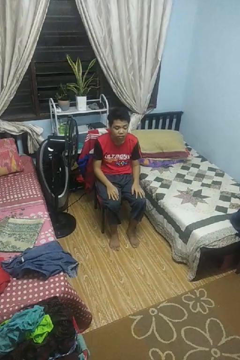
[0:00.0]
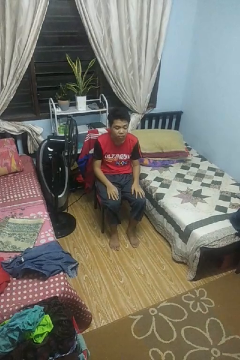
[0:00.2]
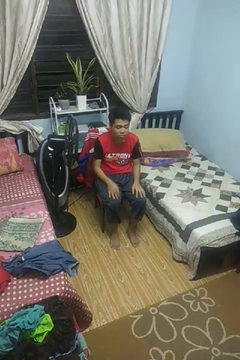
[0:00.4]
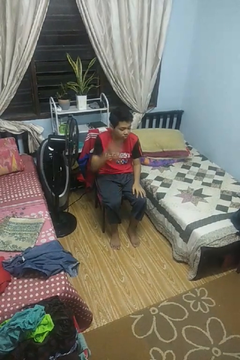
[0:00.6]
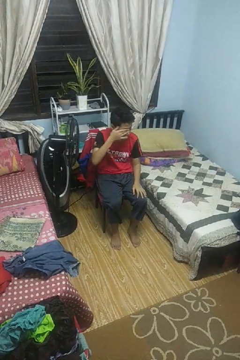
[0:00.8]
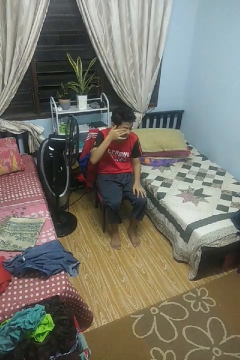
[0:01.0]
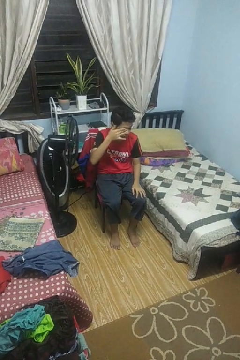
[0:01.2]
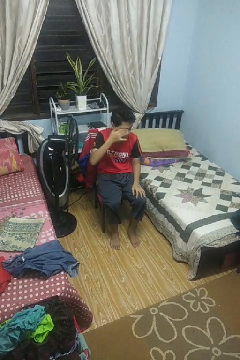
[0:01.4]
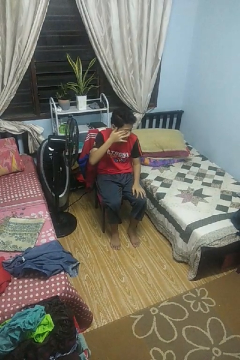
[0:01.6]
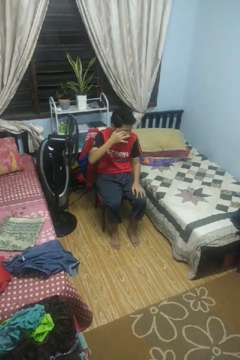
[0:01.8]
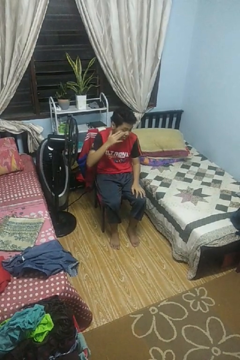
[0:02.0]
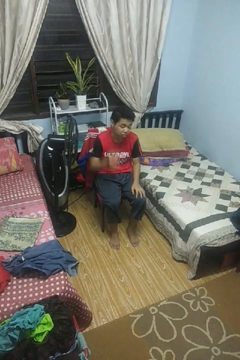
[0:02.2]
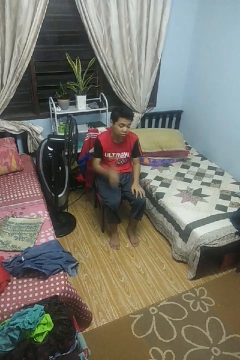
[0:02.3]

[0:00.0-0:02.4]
person rubs eyes

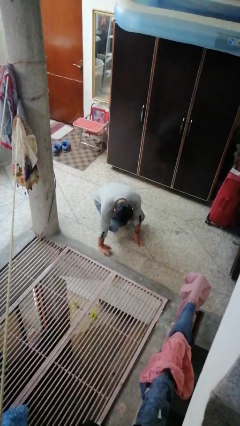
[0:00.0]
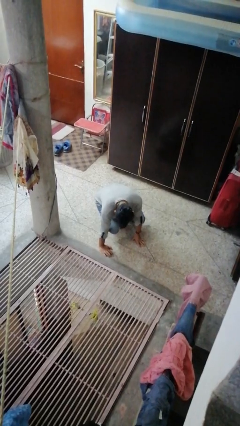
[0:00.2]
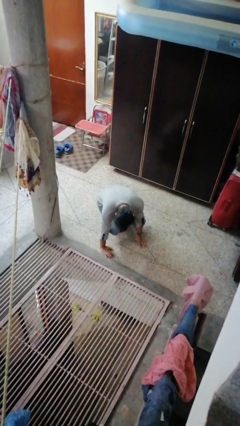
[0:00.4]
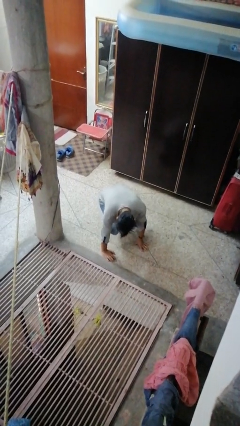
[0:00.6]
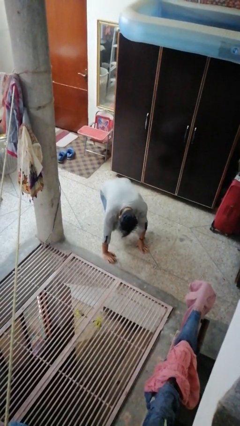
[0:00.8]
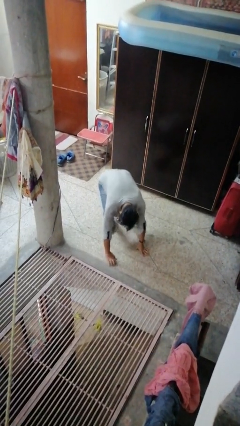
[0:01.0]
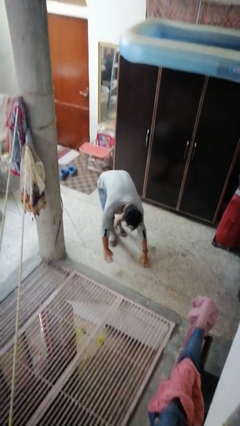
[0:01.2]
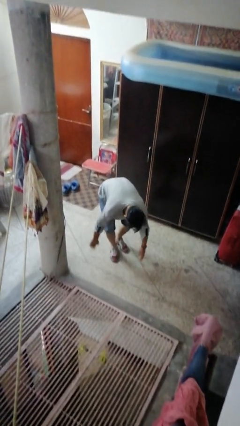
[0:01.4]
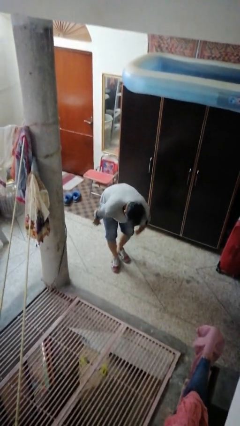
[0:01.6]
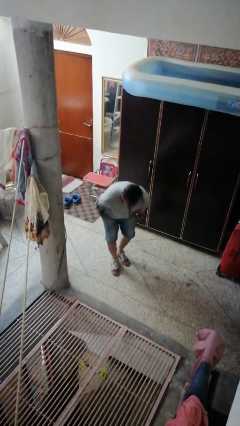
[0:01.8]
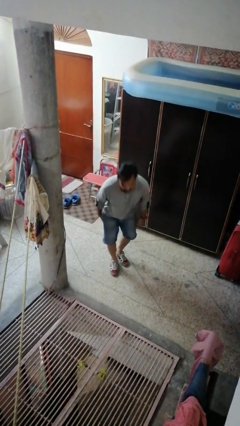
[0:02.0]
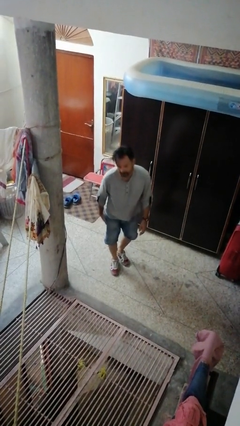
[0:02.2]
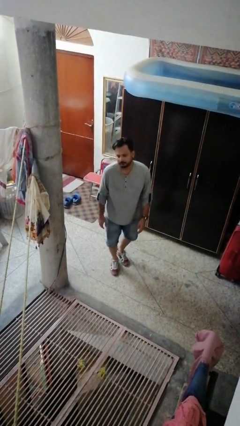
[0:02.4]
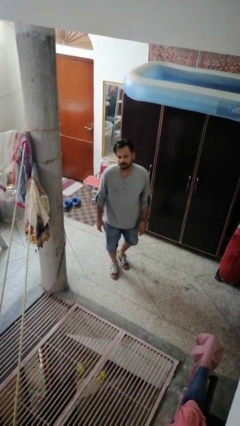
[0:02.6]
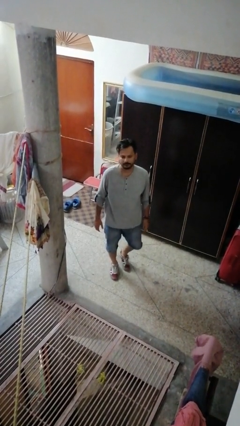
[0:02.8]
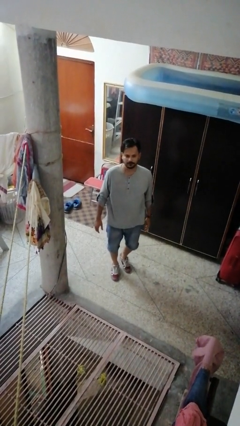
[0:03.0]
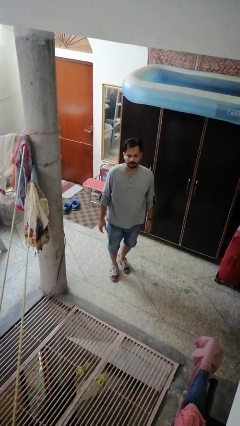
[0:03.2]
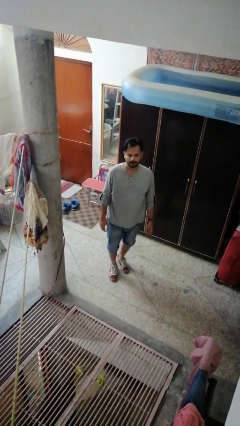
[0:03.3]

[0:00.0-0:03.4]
person stands up from floor

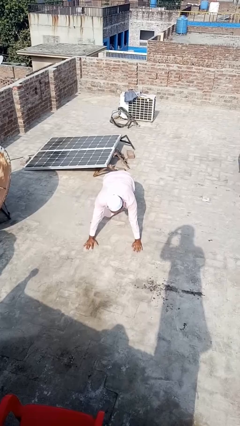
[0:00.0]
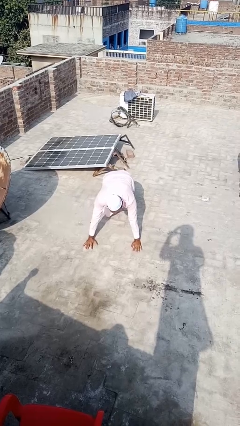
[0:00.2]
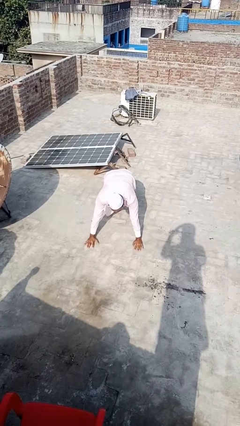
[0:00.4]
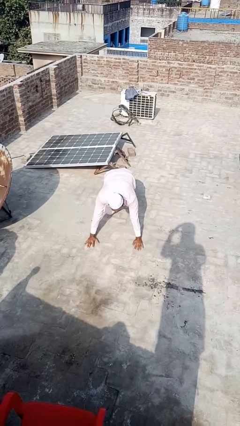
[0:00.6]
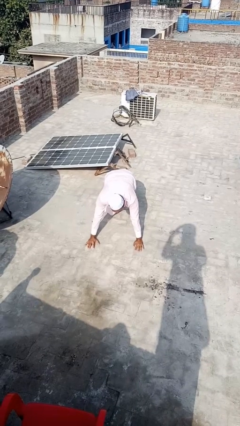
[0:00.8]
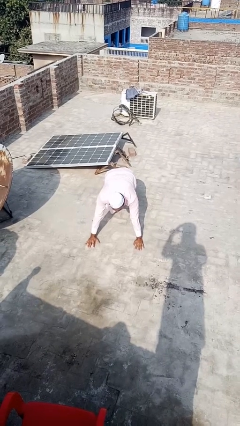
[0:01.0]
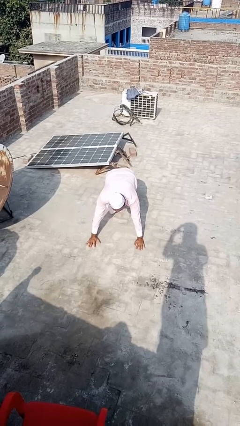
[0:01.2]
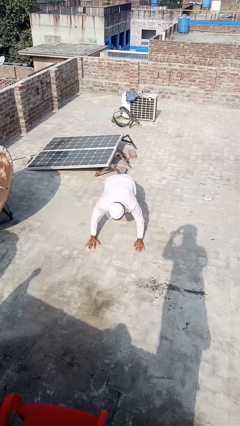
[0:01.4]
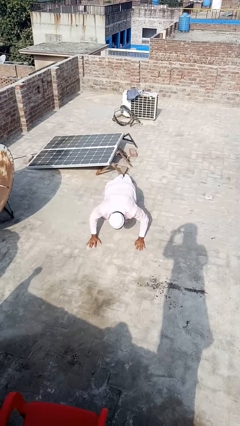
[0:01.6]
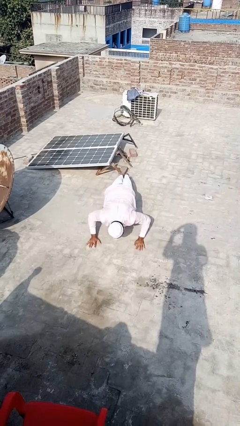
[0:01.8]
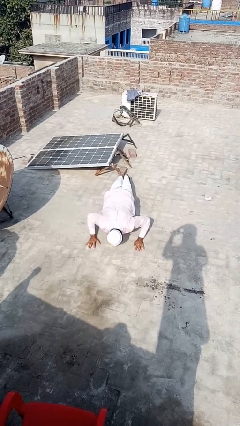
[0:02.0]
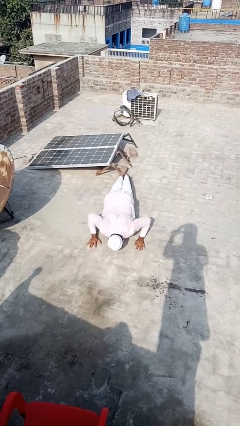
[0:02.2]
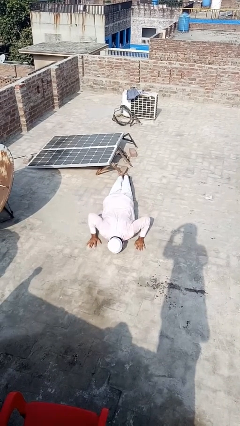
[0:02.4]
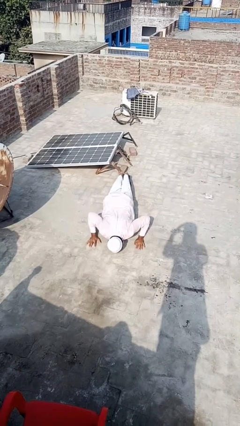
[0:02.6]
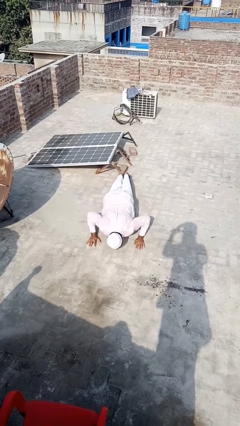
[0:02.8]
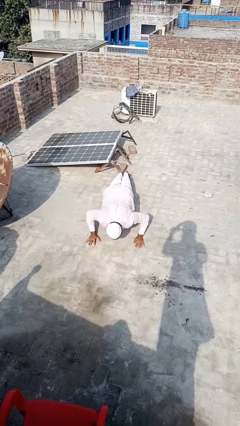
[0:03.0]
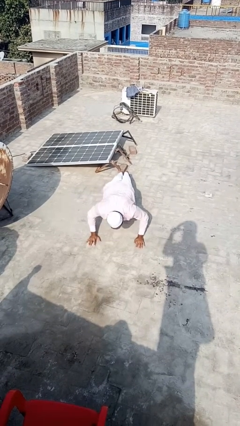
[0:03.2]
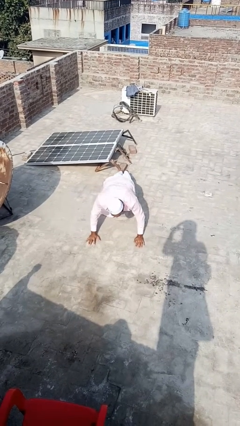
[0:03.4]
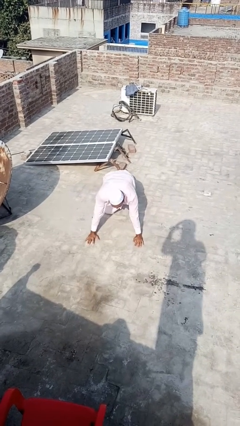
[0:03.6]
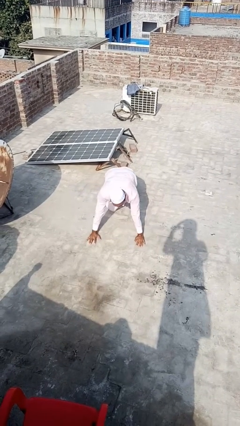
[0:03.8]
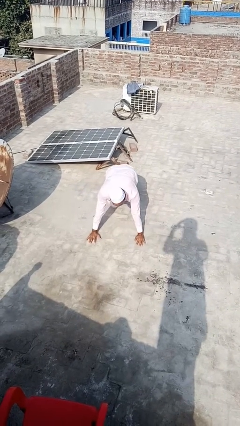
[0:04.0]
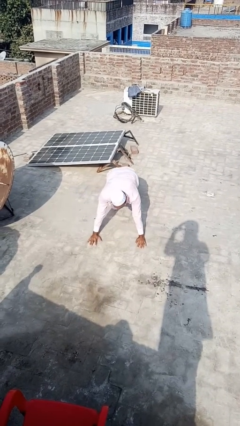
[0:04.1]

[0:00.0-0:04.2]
person exercises with pushup

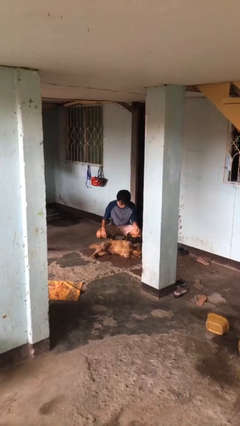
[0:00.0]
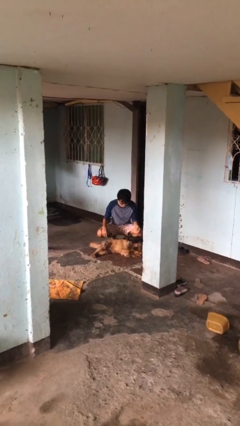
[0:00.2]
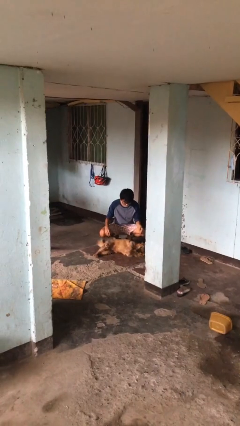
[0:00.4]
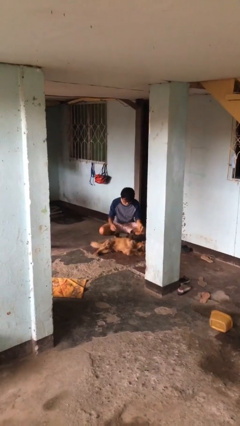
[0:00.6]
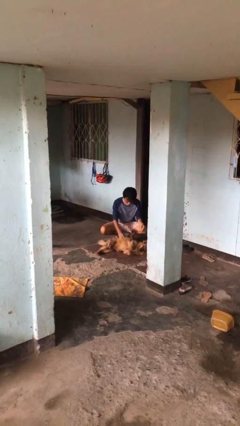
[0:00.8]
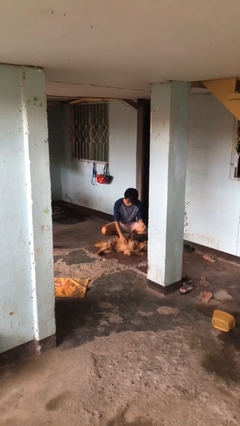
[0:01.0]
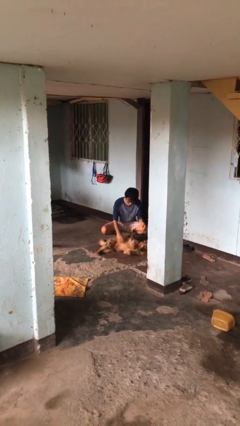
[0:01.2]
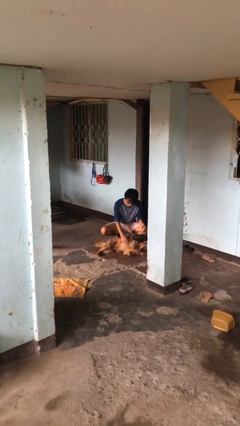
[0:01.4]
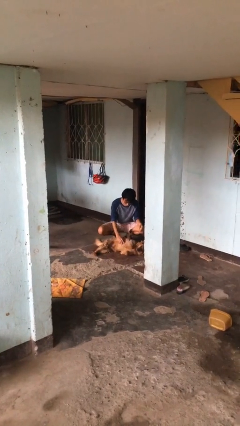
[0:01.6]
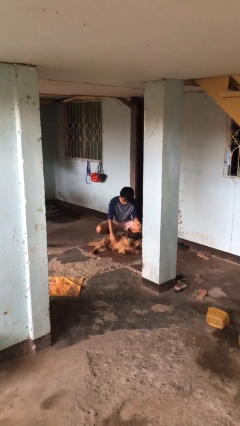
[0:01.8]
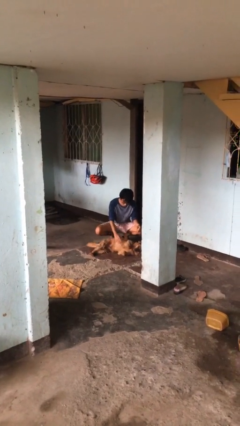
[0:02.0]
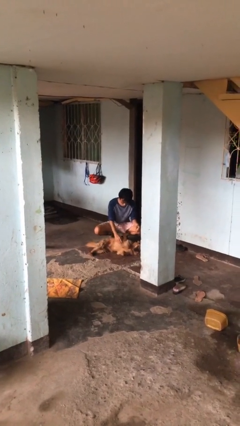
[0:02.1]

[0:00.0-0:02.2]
person pets dog

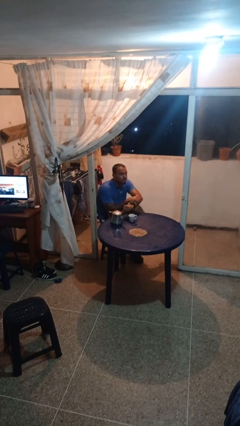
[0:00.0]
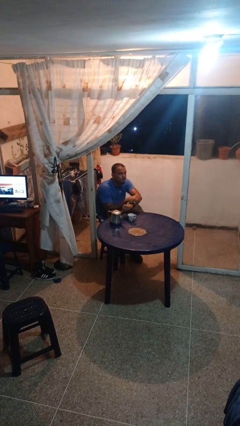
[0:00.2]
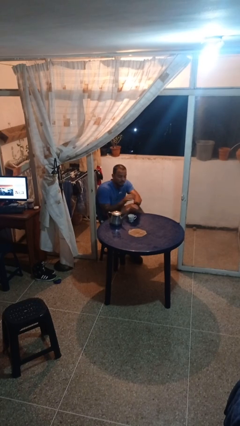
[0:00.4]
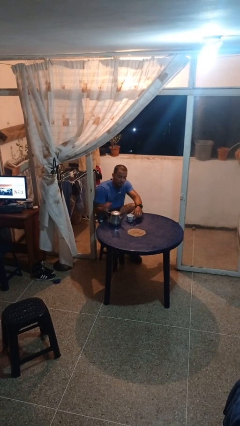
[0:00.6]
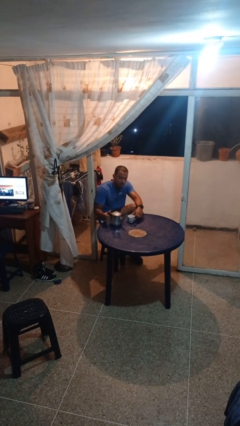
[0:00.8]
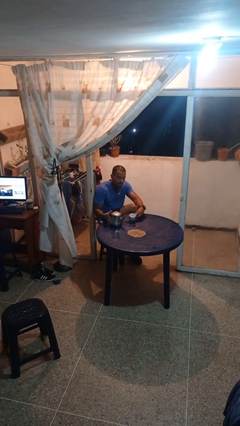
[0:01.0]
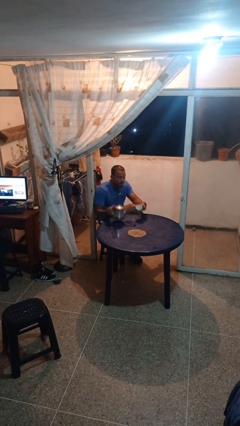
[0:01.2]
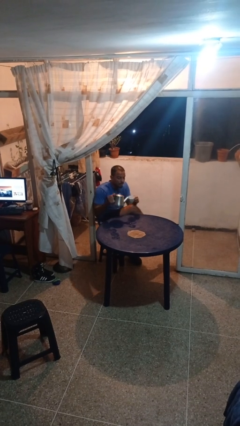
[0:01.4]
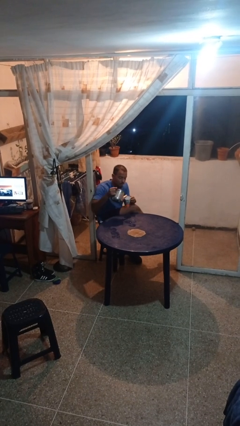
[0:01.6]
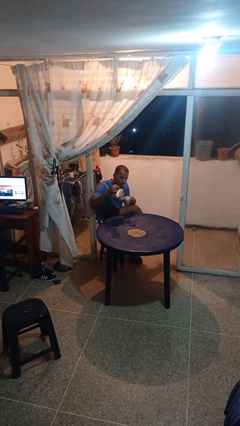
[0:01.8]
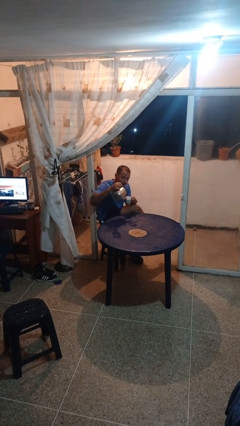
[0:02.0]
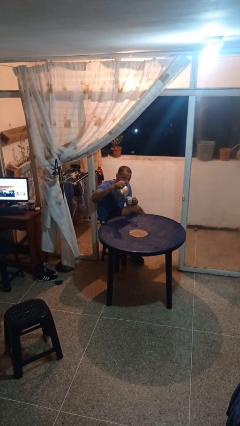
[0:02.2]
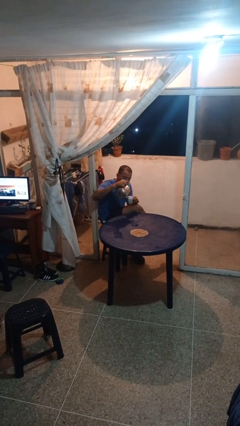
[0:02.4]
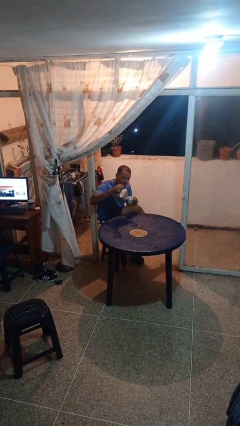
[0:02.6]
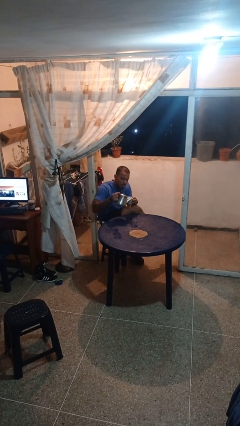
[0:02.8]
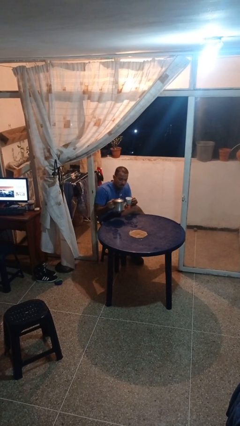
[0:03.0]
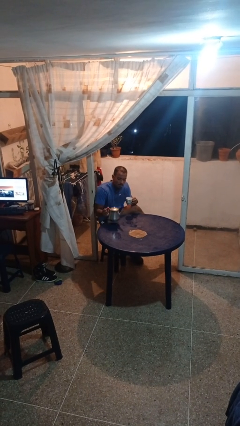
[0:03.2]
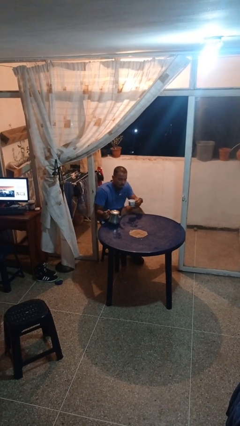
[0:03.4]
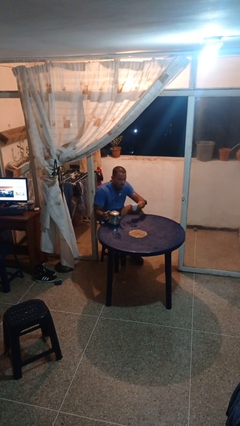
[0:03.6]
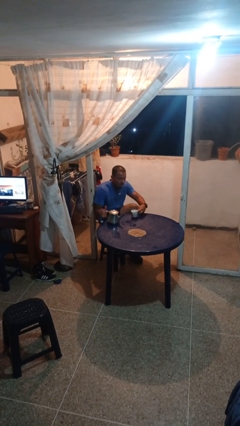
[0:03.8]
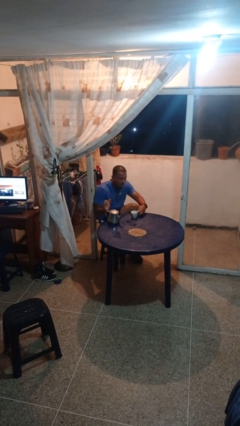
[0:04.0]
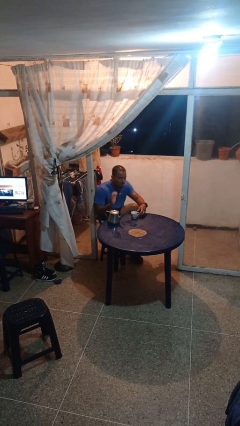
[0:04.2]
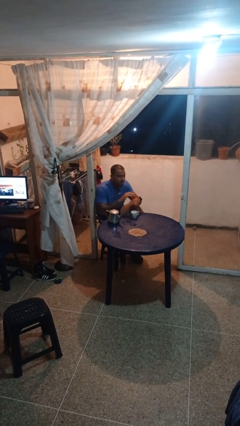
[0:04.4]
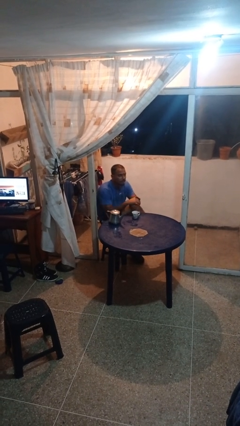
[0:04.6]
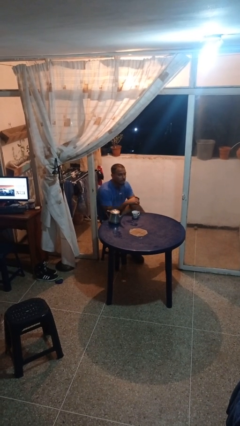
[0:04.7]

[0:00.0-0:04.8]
person pours coffee into mug

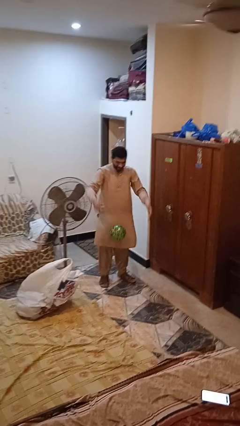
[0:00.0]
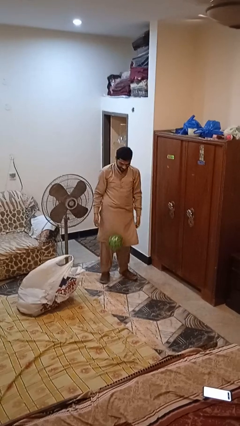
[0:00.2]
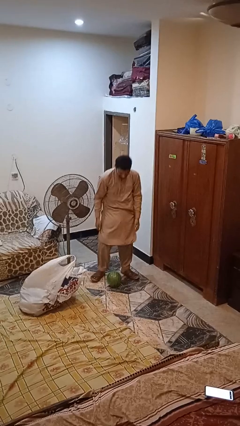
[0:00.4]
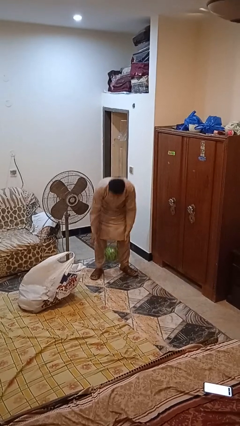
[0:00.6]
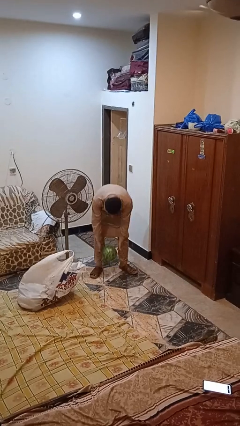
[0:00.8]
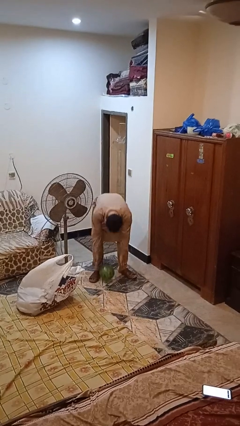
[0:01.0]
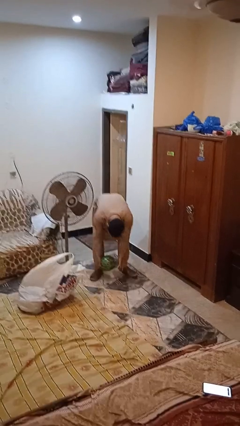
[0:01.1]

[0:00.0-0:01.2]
person catches dropped object
